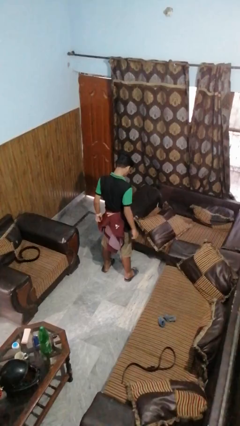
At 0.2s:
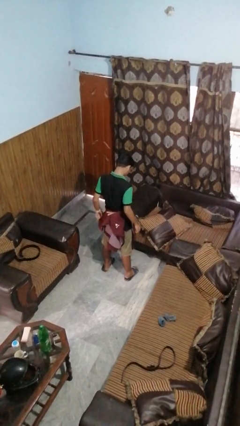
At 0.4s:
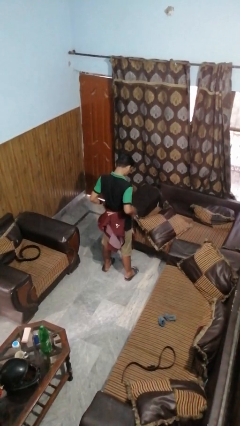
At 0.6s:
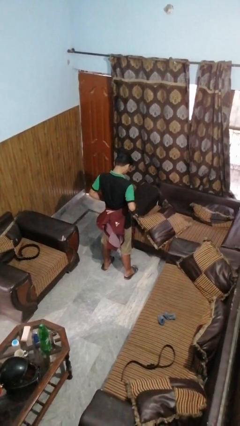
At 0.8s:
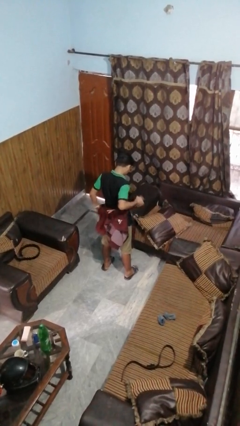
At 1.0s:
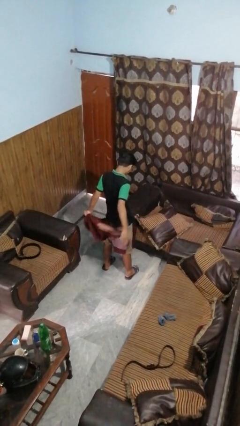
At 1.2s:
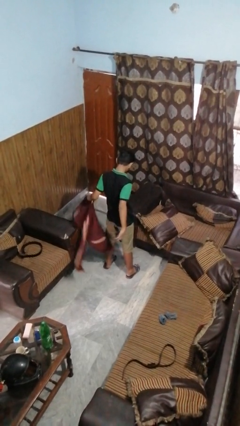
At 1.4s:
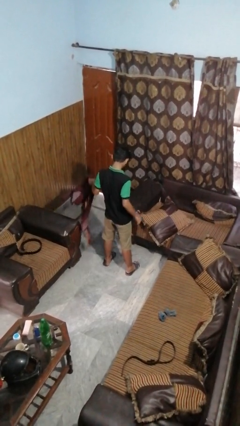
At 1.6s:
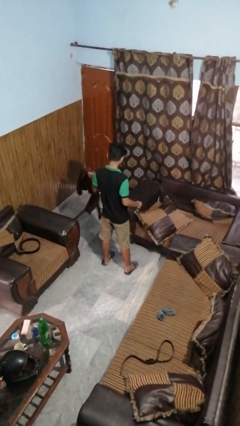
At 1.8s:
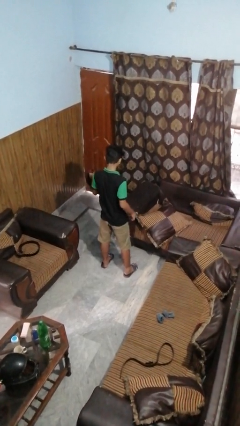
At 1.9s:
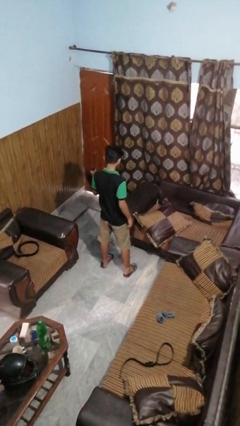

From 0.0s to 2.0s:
person unties jacket around waist

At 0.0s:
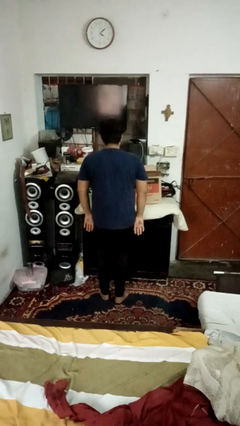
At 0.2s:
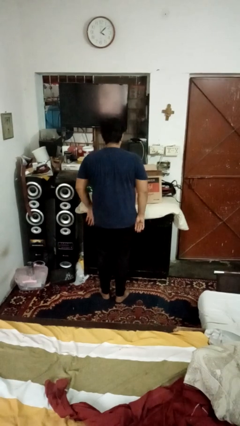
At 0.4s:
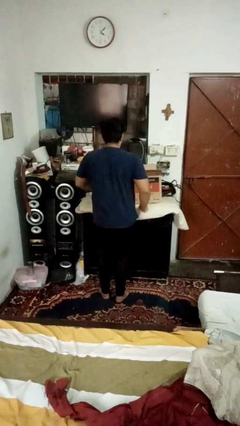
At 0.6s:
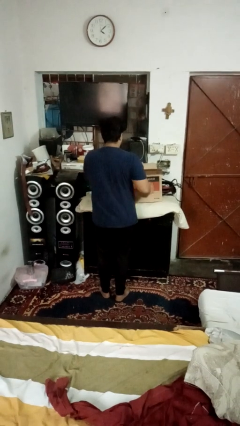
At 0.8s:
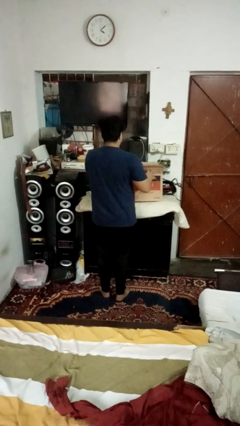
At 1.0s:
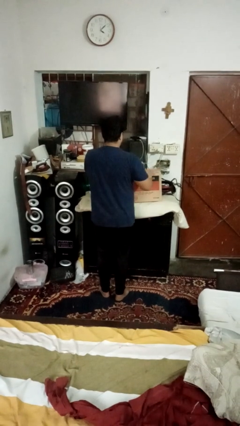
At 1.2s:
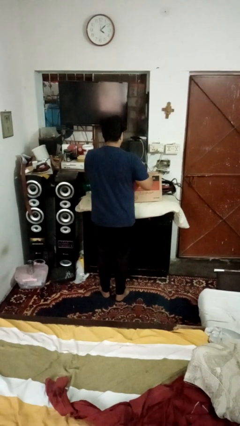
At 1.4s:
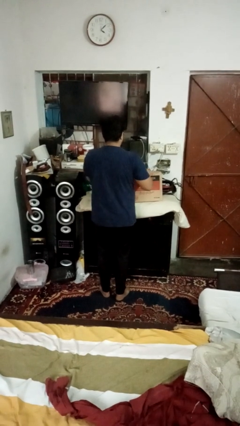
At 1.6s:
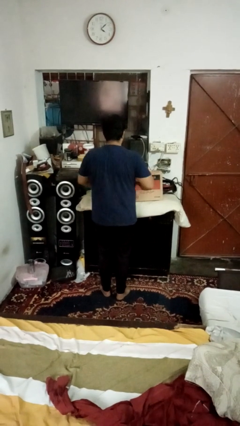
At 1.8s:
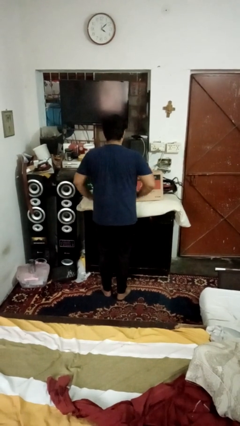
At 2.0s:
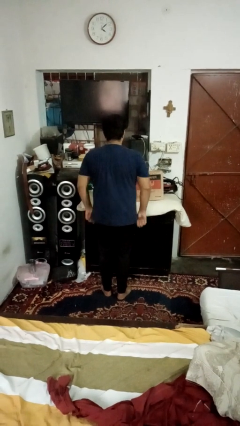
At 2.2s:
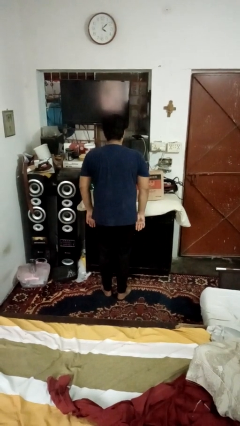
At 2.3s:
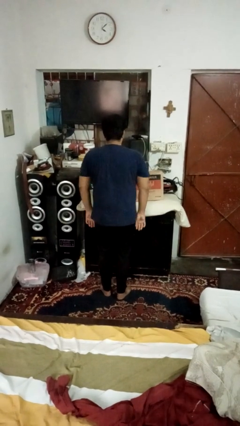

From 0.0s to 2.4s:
person closes box

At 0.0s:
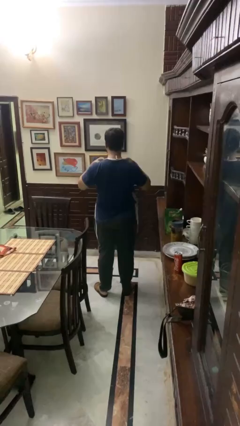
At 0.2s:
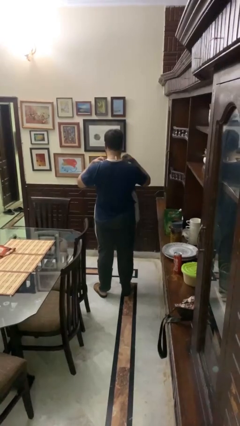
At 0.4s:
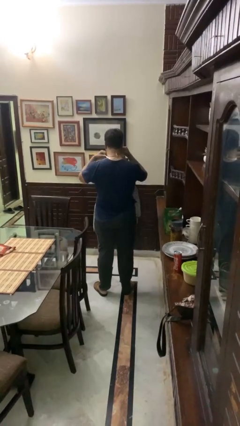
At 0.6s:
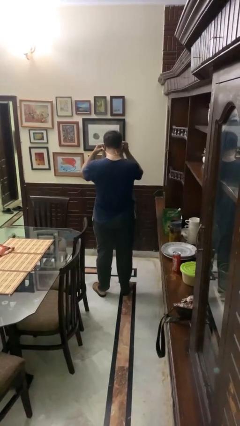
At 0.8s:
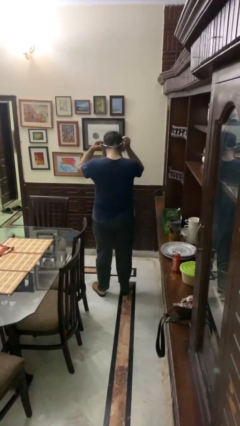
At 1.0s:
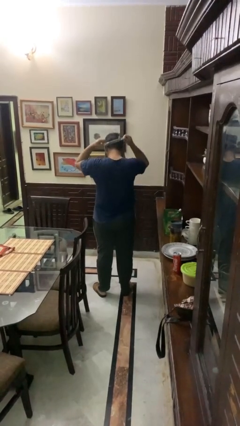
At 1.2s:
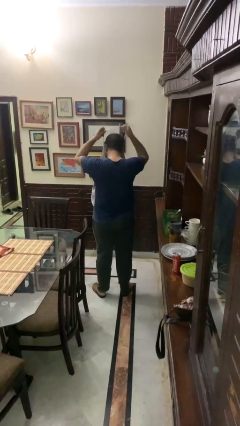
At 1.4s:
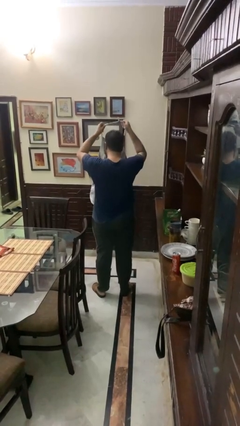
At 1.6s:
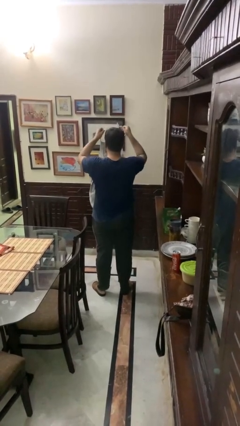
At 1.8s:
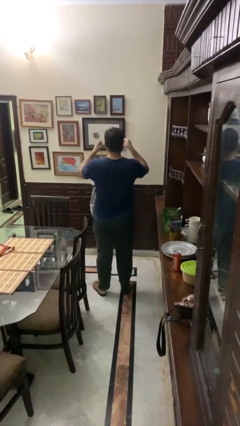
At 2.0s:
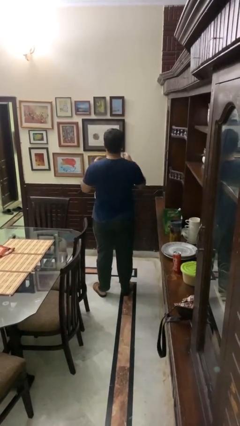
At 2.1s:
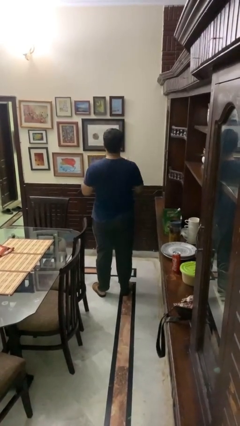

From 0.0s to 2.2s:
person takes off apron

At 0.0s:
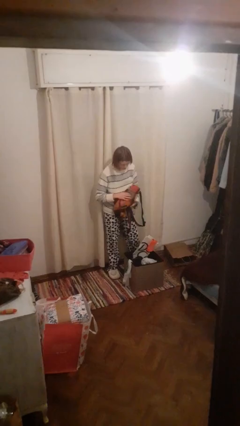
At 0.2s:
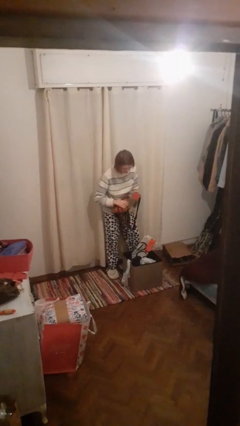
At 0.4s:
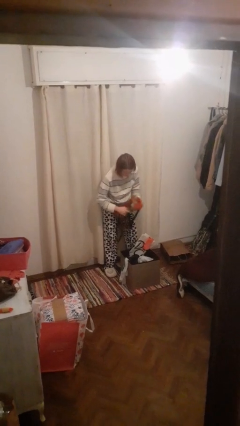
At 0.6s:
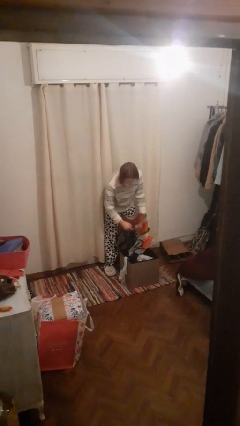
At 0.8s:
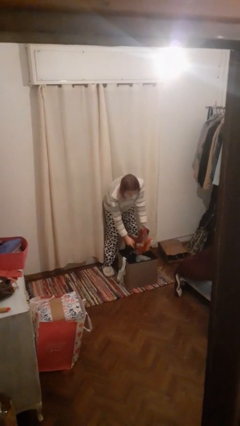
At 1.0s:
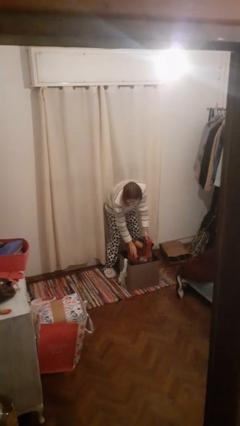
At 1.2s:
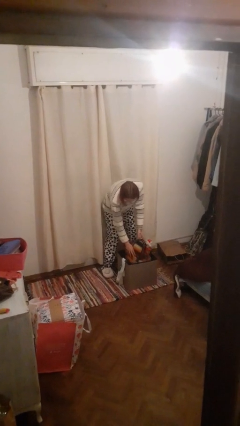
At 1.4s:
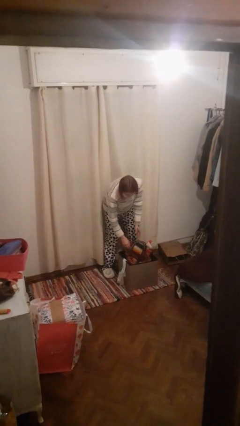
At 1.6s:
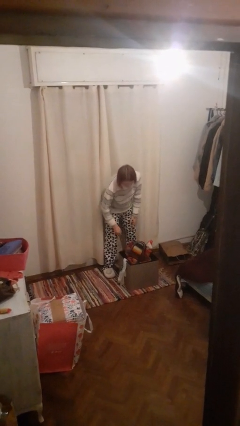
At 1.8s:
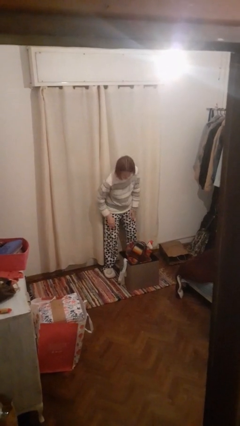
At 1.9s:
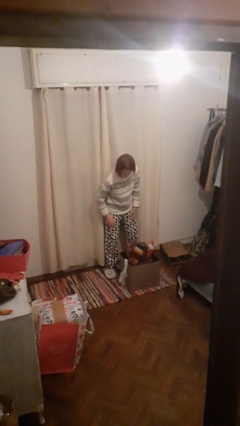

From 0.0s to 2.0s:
person puts object into basket

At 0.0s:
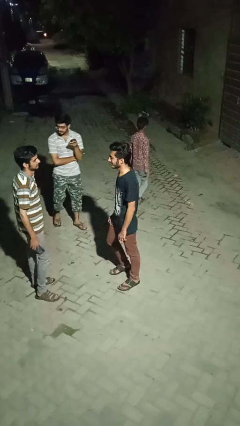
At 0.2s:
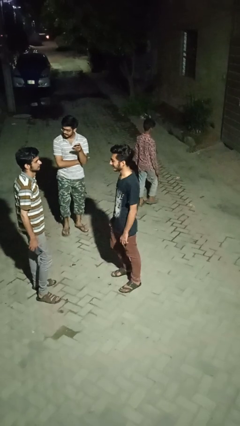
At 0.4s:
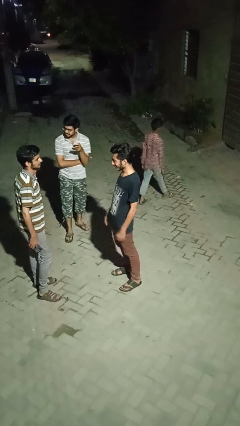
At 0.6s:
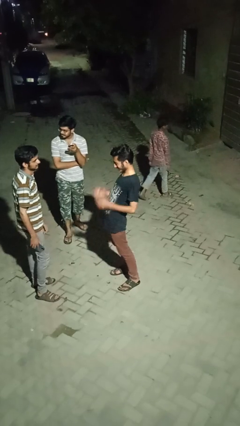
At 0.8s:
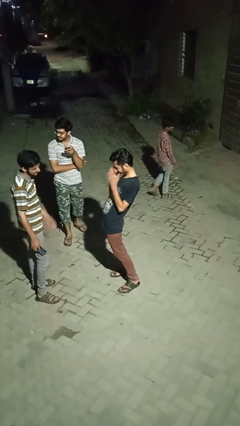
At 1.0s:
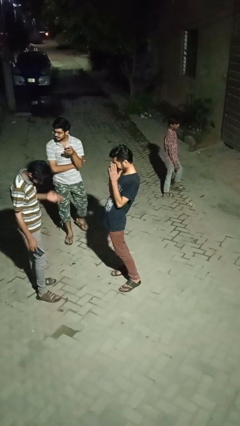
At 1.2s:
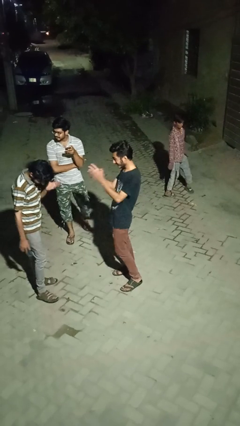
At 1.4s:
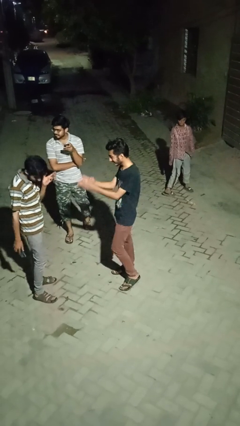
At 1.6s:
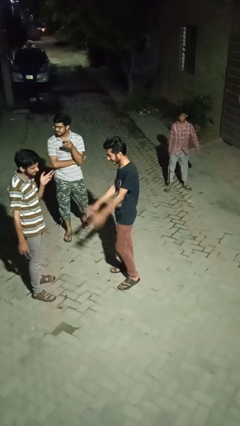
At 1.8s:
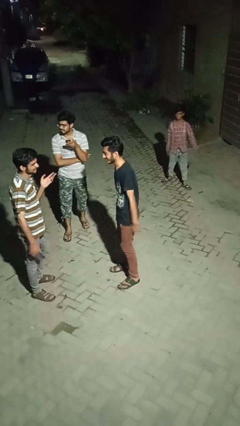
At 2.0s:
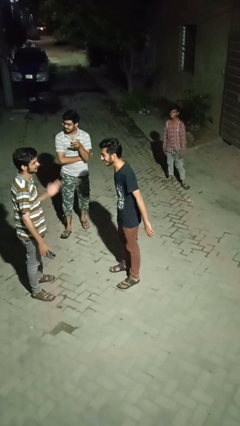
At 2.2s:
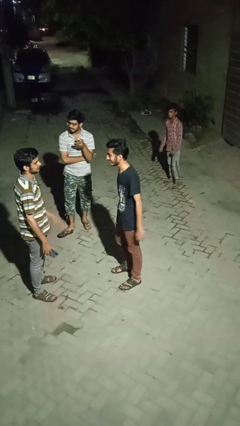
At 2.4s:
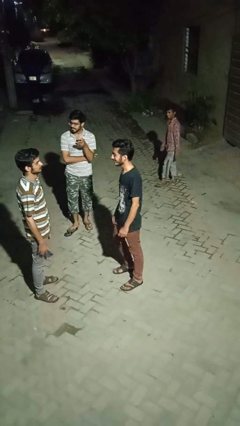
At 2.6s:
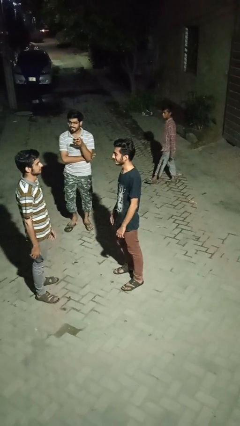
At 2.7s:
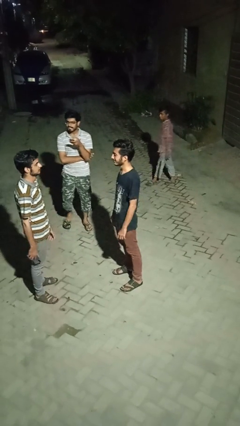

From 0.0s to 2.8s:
person laughs with person

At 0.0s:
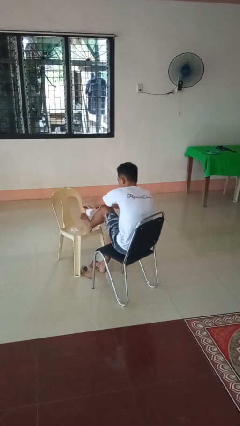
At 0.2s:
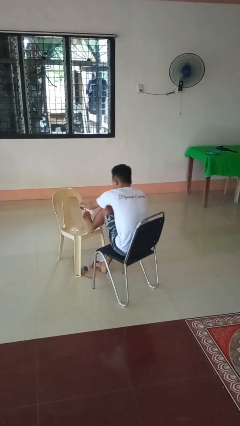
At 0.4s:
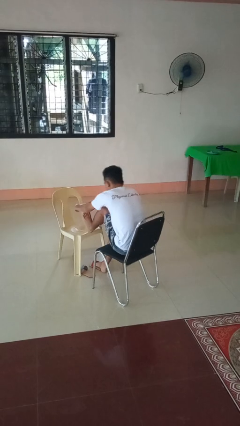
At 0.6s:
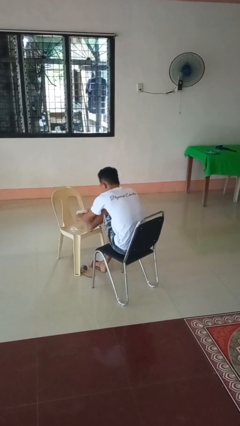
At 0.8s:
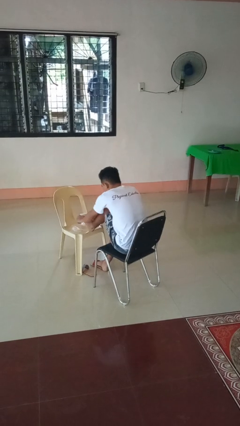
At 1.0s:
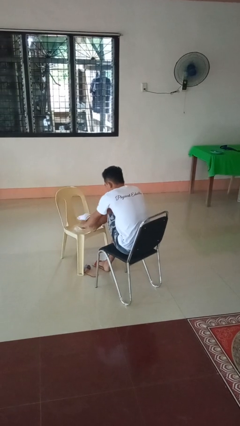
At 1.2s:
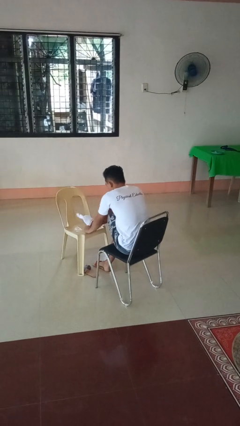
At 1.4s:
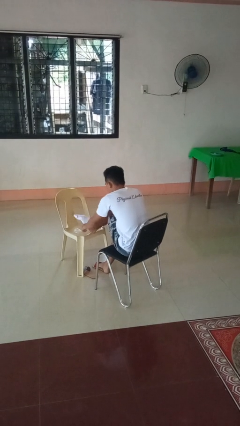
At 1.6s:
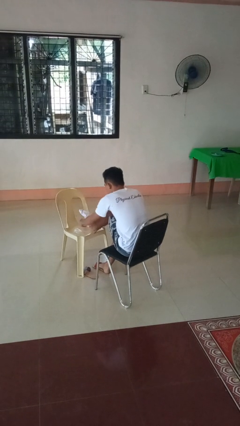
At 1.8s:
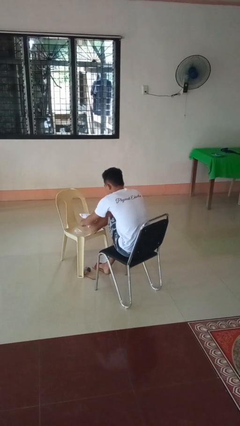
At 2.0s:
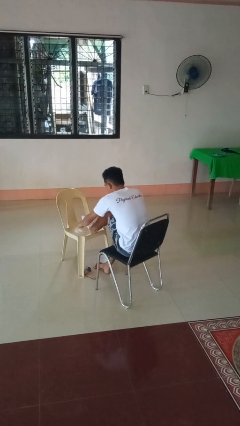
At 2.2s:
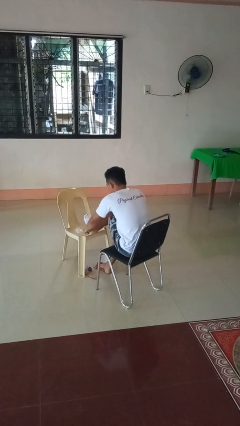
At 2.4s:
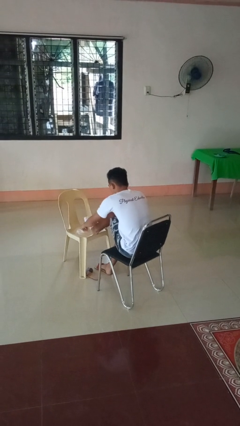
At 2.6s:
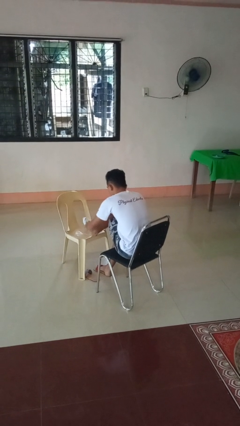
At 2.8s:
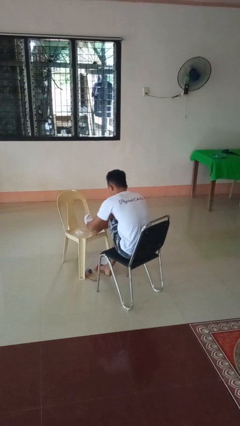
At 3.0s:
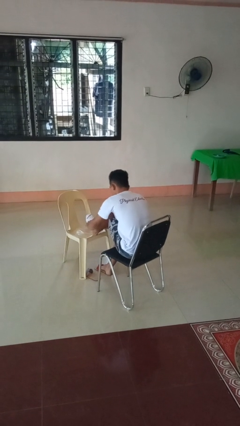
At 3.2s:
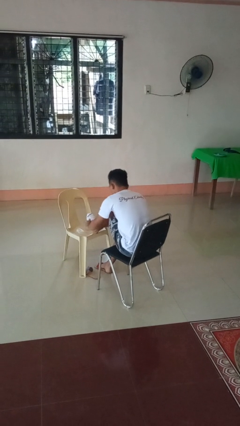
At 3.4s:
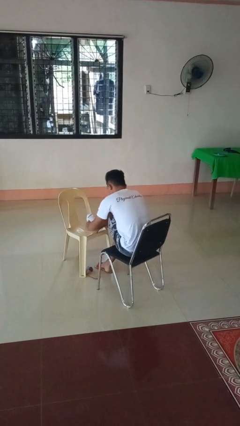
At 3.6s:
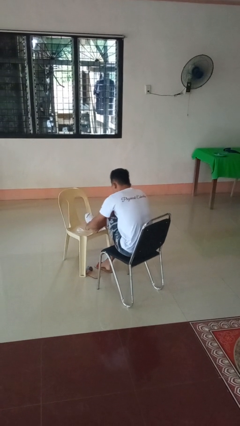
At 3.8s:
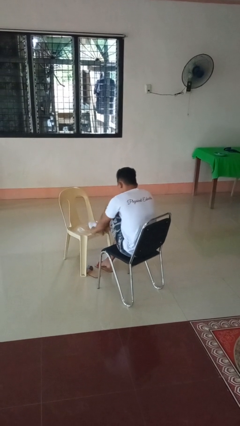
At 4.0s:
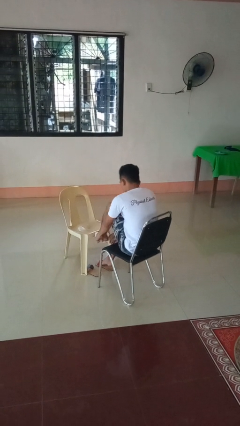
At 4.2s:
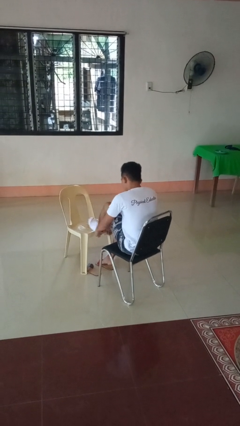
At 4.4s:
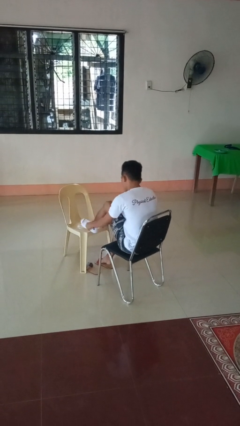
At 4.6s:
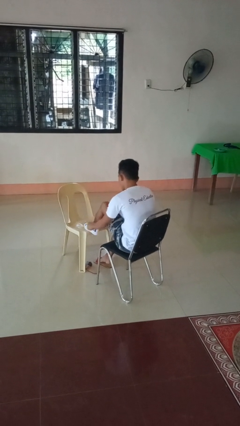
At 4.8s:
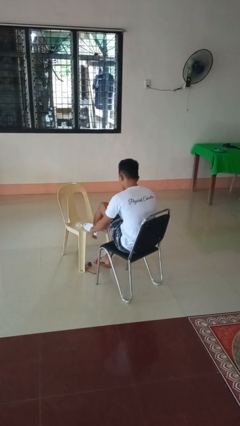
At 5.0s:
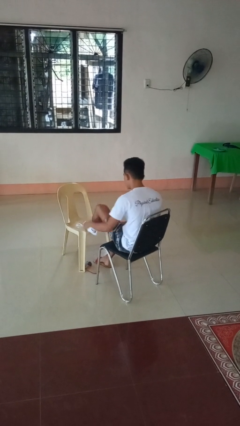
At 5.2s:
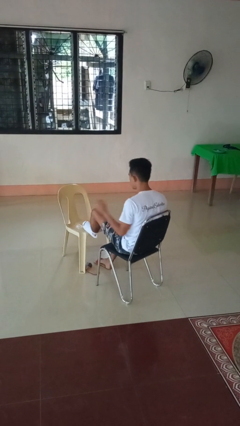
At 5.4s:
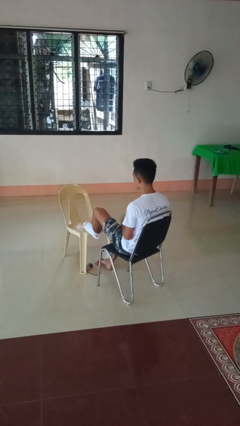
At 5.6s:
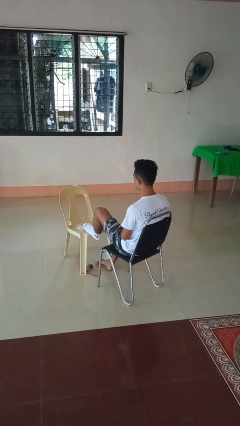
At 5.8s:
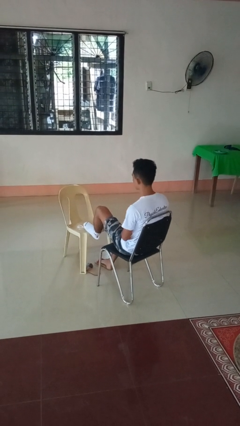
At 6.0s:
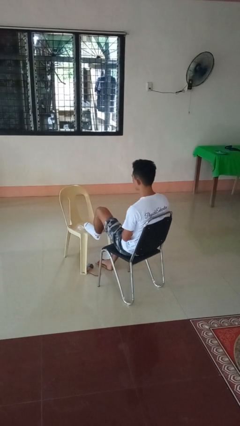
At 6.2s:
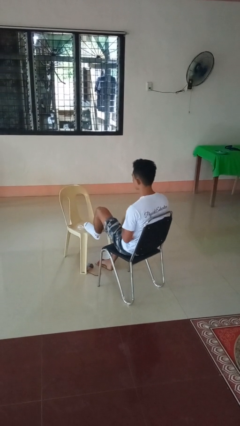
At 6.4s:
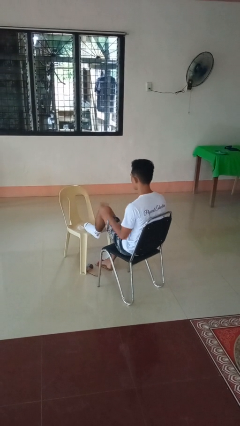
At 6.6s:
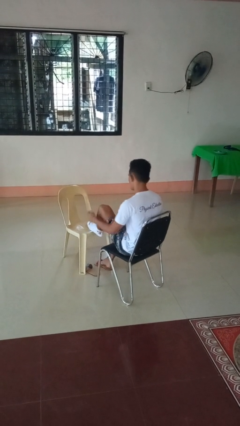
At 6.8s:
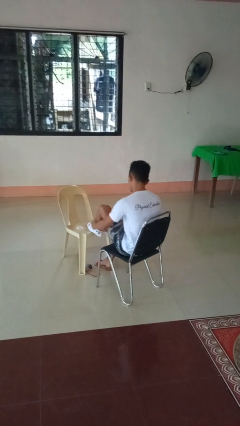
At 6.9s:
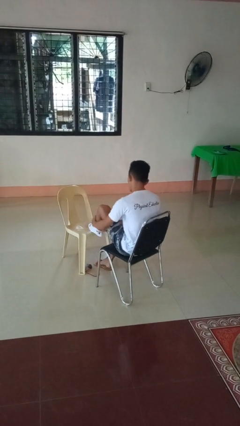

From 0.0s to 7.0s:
person puts on socks
